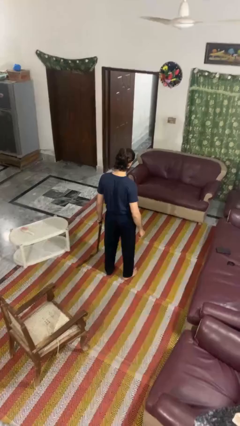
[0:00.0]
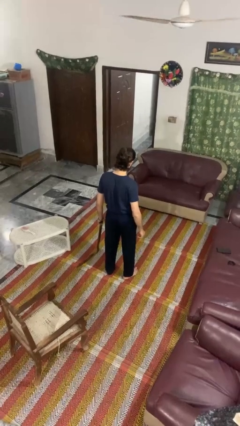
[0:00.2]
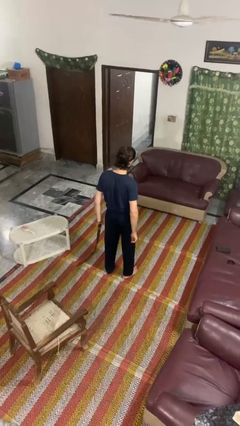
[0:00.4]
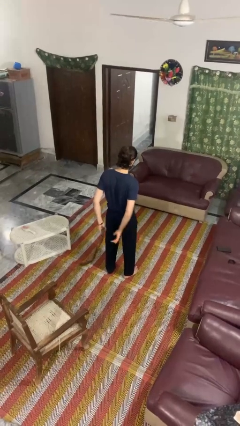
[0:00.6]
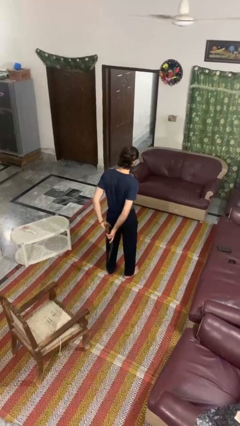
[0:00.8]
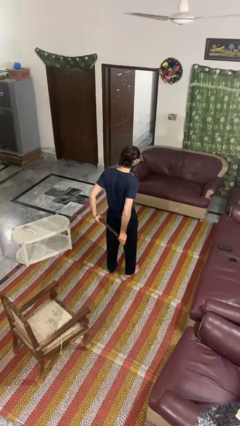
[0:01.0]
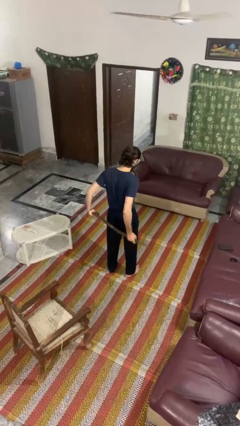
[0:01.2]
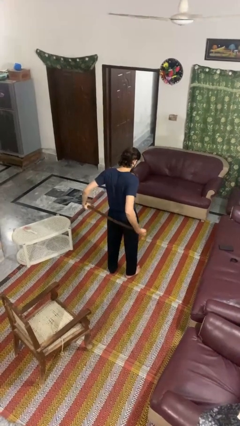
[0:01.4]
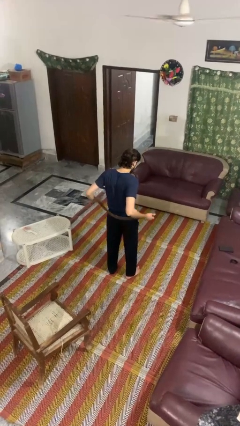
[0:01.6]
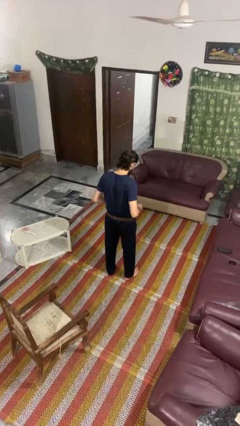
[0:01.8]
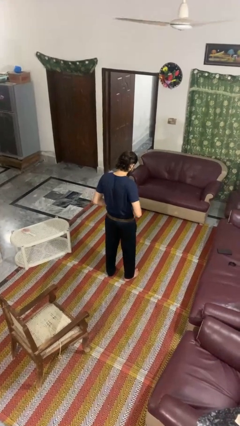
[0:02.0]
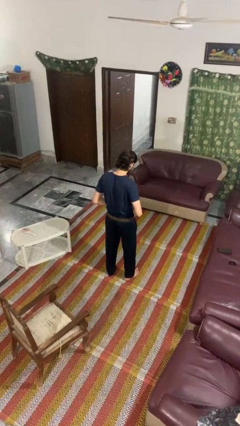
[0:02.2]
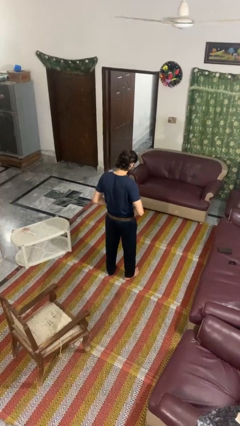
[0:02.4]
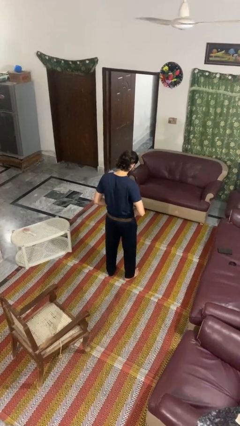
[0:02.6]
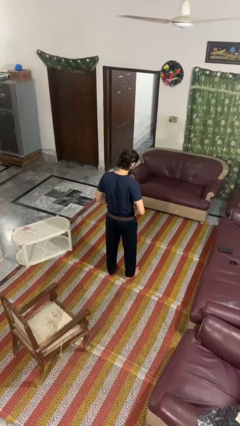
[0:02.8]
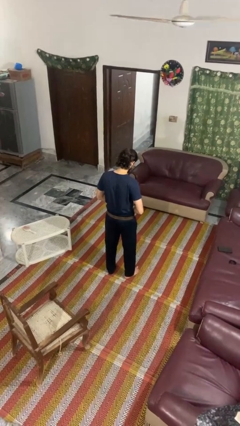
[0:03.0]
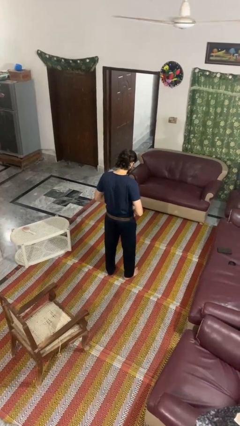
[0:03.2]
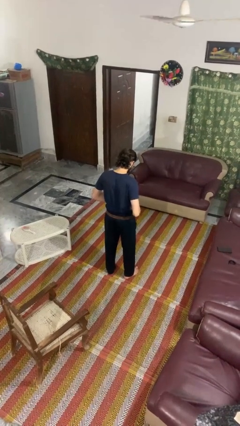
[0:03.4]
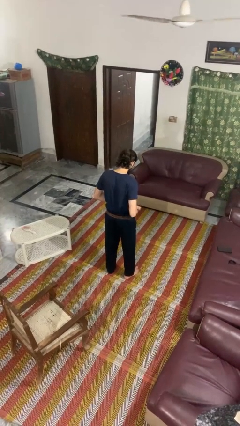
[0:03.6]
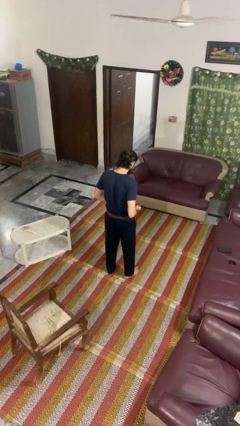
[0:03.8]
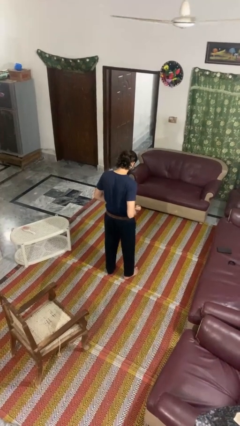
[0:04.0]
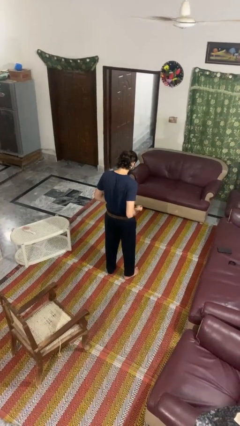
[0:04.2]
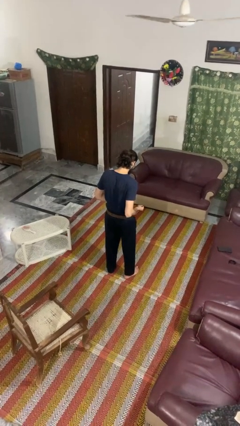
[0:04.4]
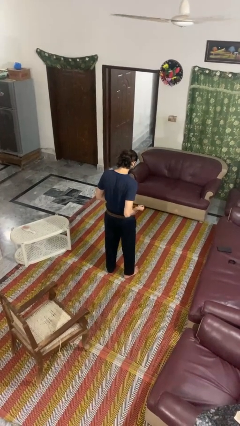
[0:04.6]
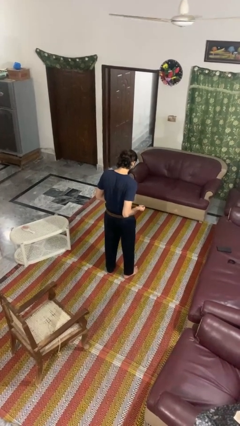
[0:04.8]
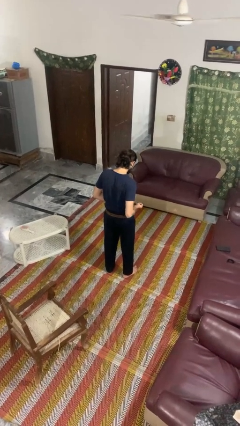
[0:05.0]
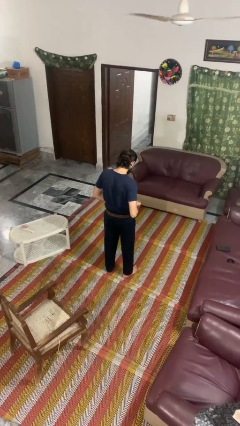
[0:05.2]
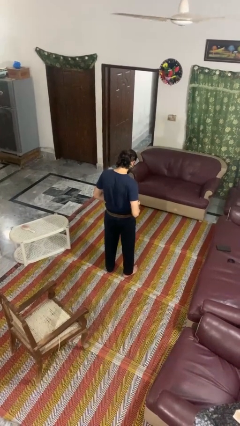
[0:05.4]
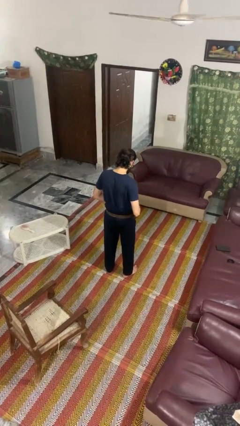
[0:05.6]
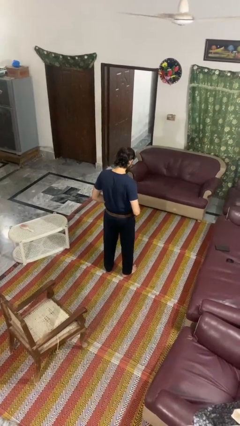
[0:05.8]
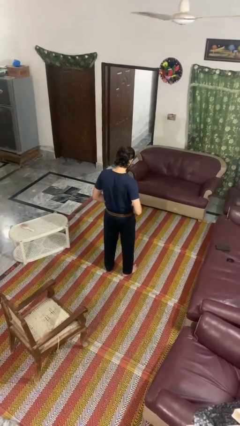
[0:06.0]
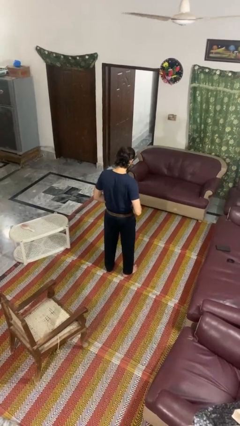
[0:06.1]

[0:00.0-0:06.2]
person puts on belt

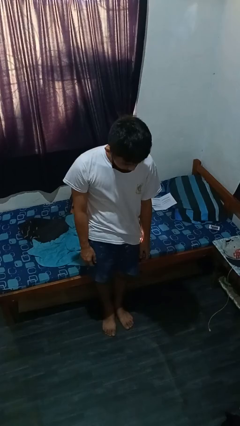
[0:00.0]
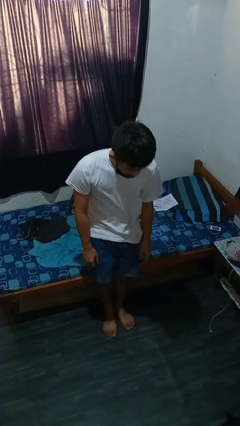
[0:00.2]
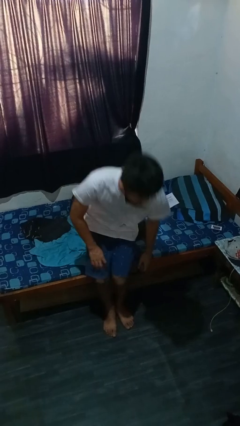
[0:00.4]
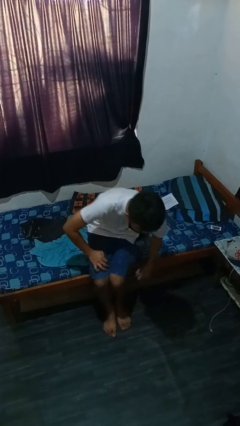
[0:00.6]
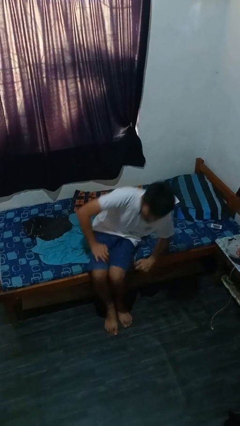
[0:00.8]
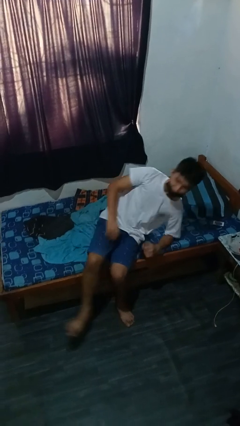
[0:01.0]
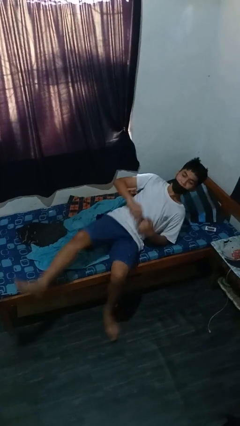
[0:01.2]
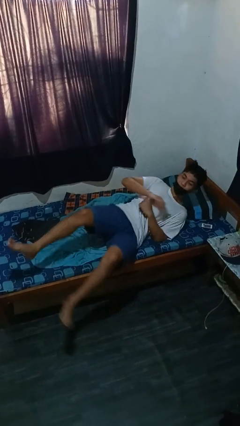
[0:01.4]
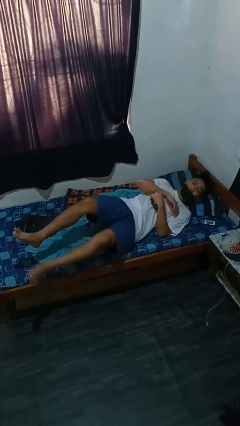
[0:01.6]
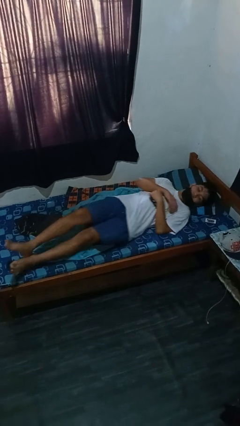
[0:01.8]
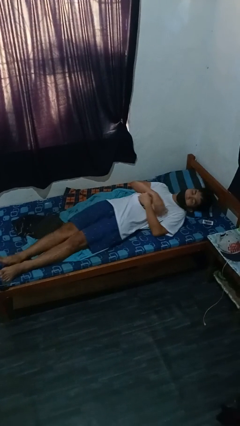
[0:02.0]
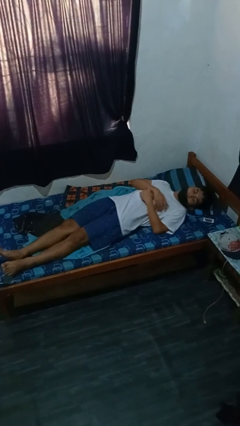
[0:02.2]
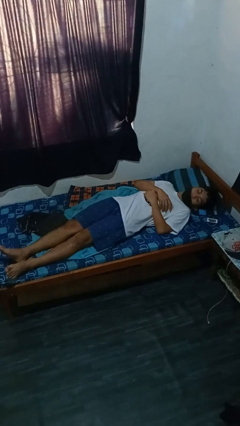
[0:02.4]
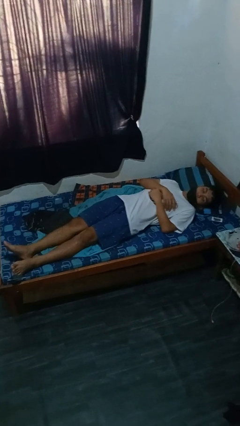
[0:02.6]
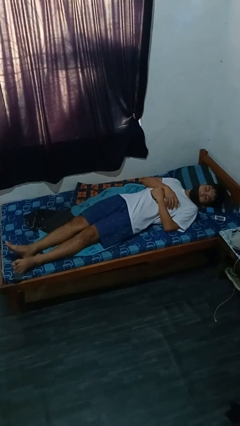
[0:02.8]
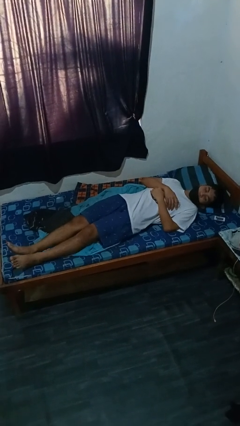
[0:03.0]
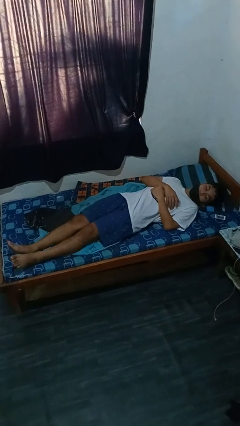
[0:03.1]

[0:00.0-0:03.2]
person lies down on bed

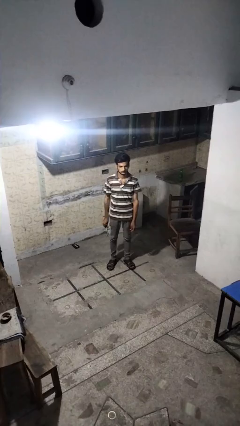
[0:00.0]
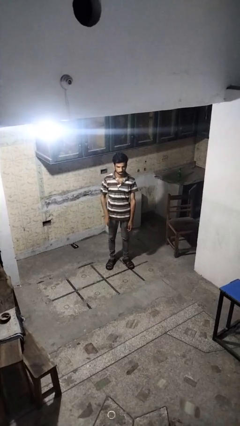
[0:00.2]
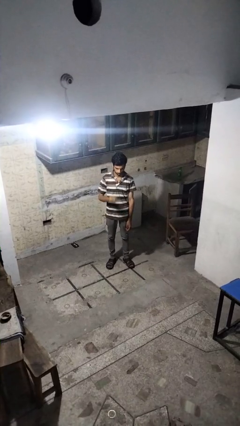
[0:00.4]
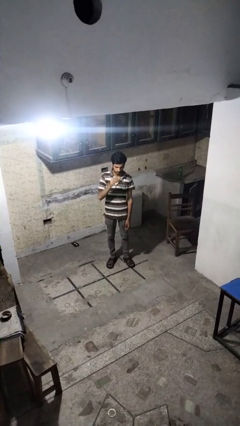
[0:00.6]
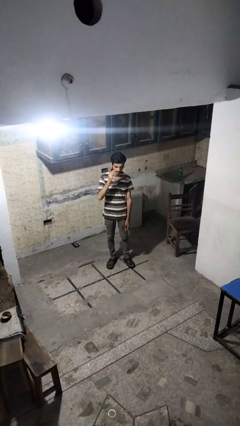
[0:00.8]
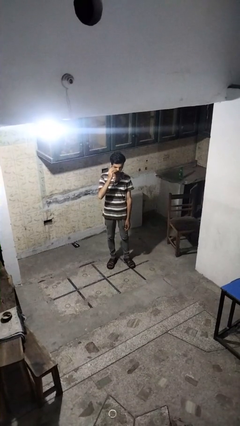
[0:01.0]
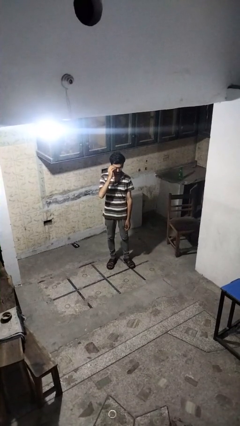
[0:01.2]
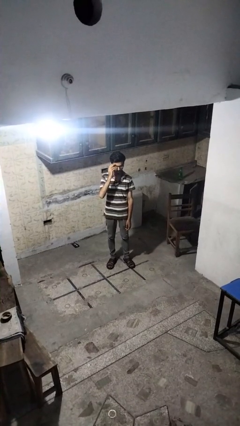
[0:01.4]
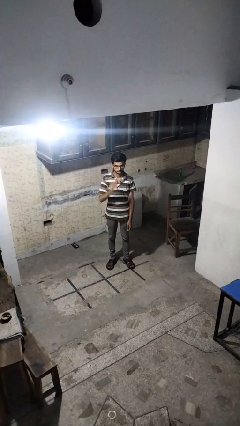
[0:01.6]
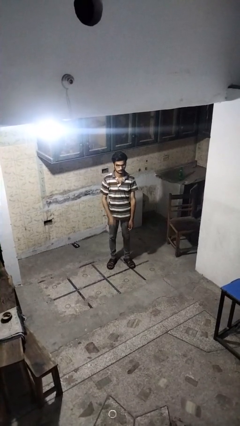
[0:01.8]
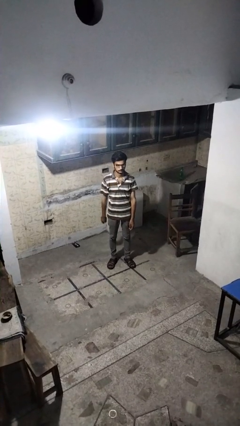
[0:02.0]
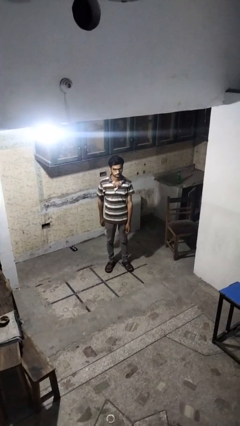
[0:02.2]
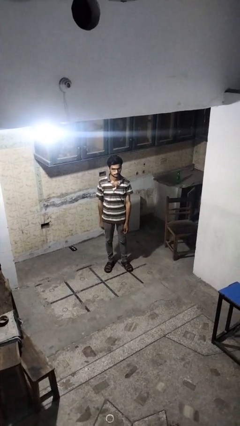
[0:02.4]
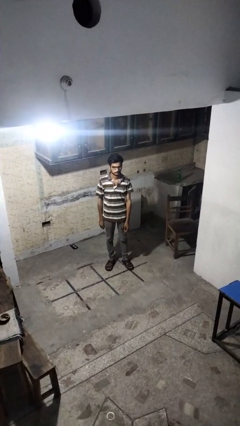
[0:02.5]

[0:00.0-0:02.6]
person puts on glasses

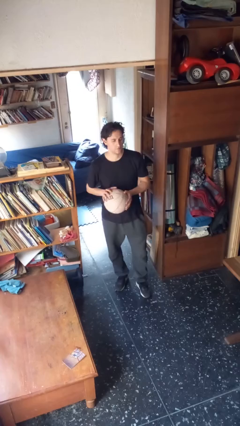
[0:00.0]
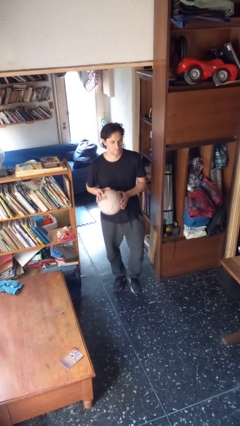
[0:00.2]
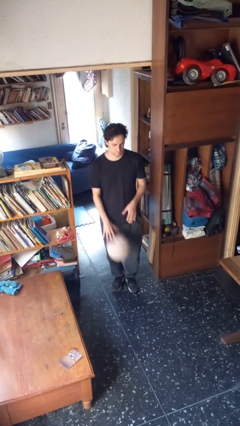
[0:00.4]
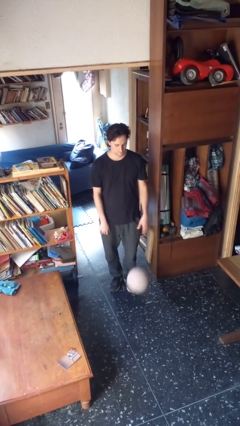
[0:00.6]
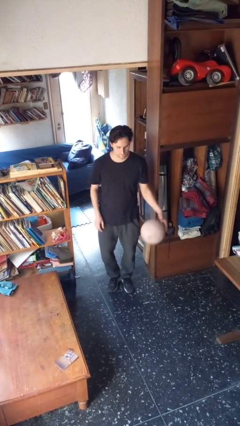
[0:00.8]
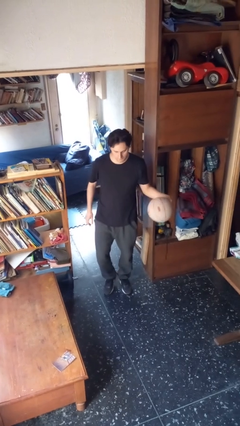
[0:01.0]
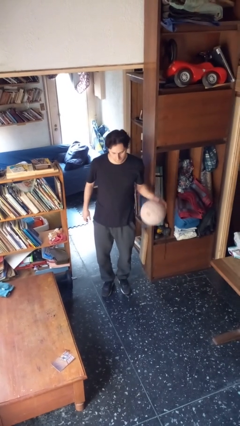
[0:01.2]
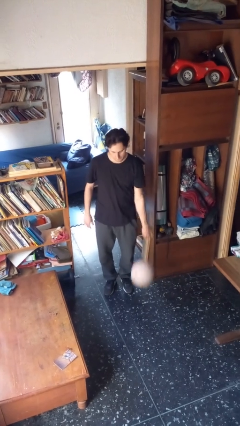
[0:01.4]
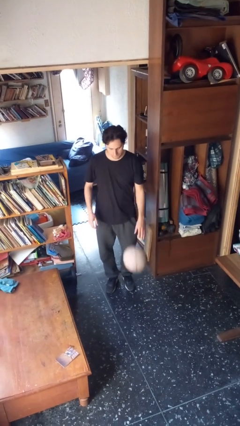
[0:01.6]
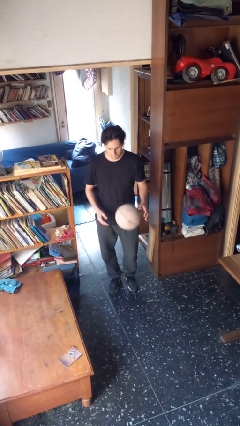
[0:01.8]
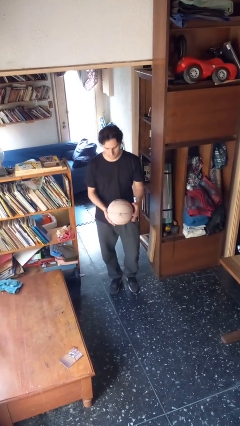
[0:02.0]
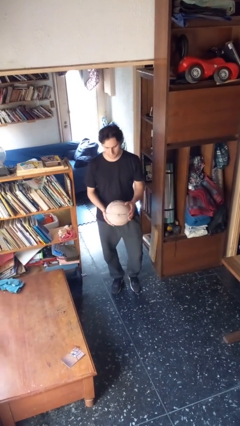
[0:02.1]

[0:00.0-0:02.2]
person bounces ball on floor

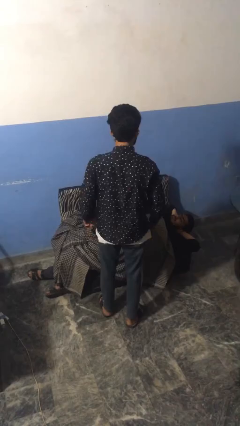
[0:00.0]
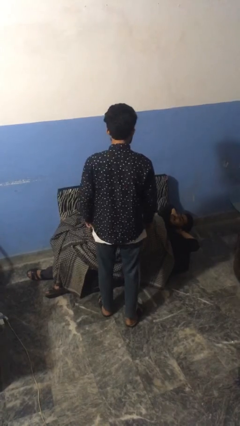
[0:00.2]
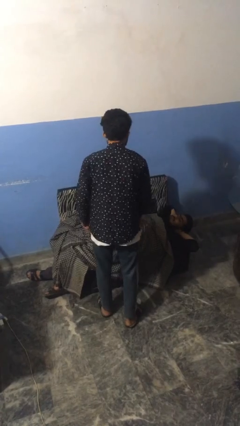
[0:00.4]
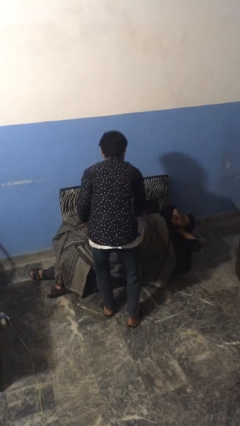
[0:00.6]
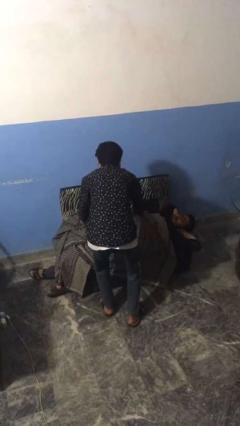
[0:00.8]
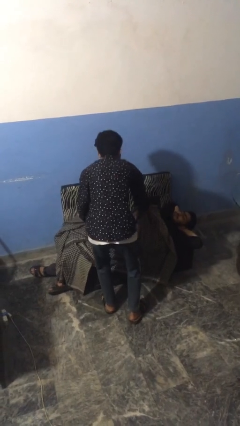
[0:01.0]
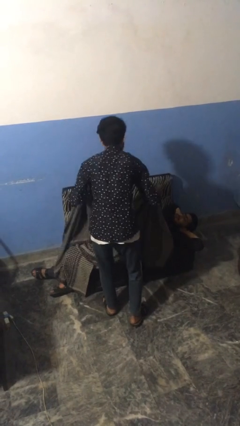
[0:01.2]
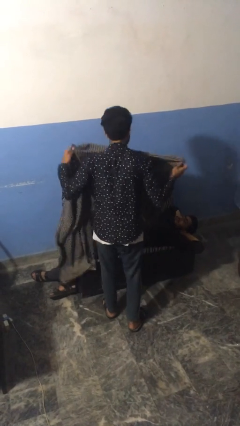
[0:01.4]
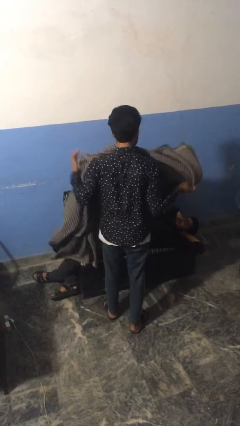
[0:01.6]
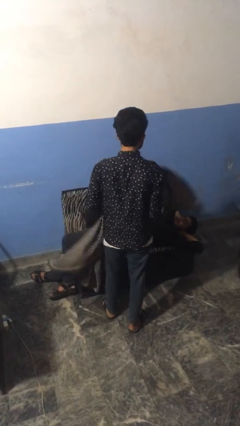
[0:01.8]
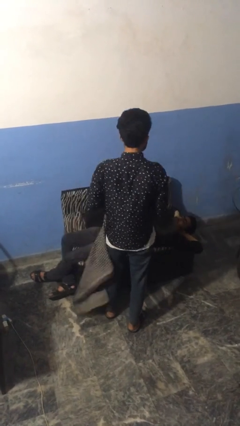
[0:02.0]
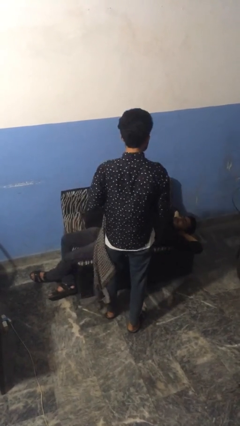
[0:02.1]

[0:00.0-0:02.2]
person uncovers friend with blanket

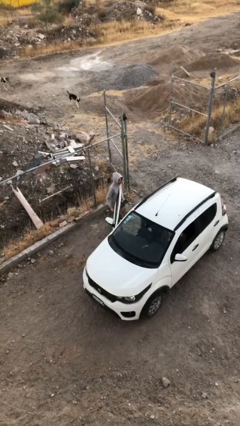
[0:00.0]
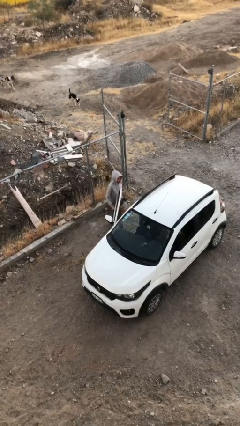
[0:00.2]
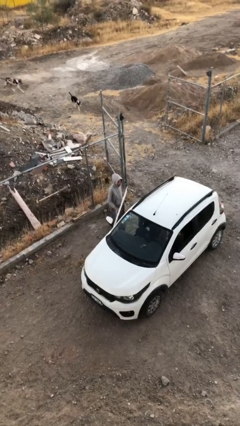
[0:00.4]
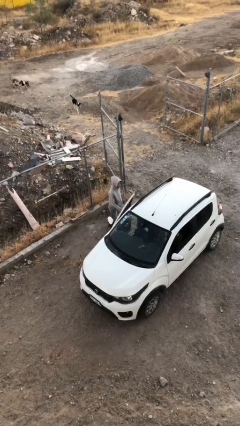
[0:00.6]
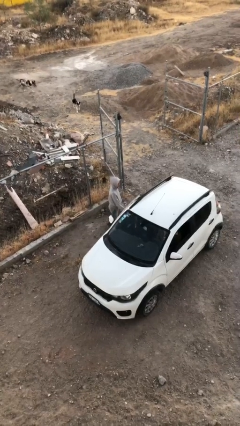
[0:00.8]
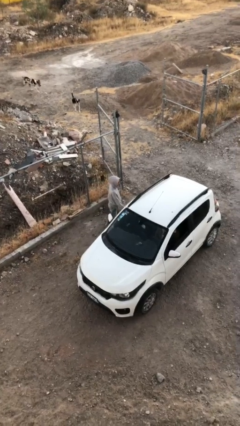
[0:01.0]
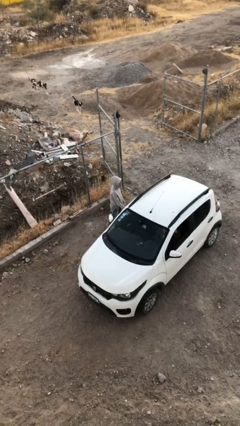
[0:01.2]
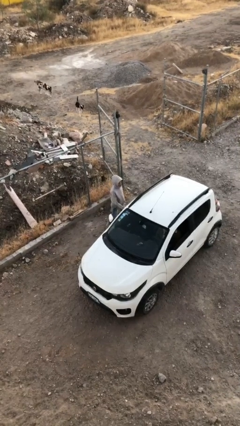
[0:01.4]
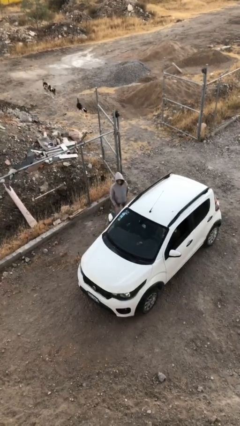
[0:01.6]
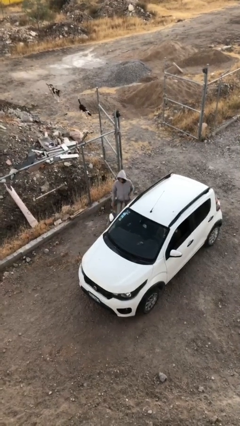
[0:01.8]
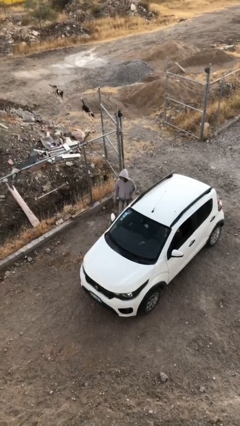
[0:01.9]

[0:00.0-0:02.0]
person closes car door
